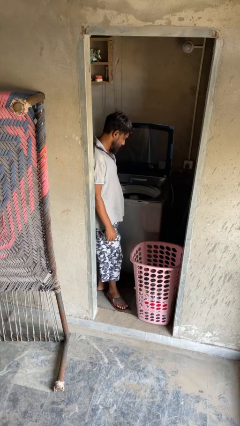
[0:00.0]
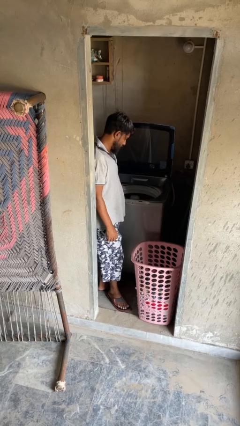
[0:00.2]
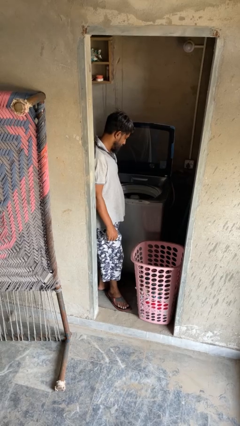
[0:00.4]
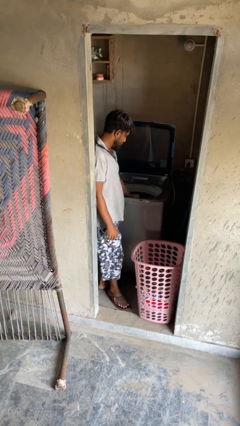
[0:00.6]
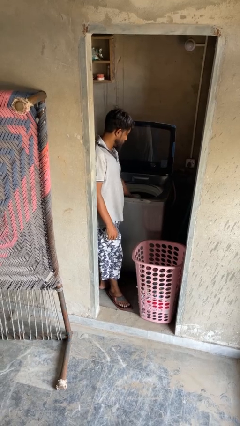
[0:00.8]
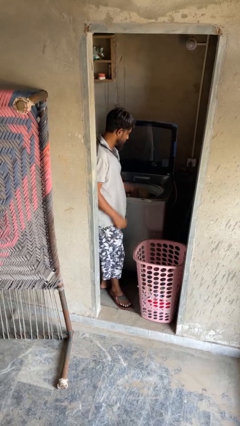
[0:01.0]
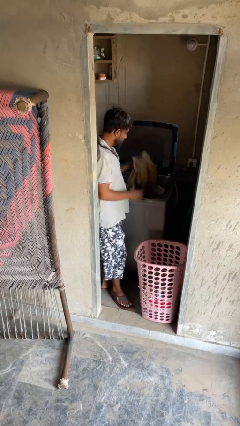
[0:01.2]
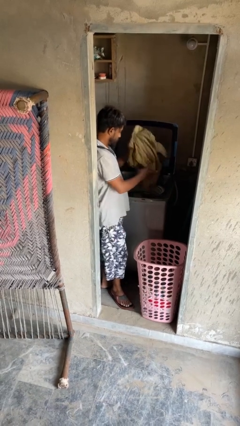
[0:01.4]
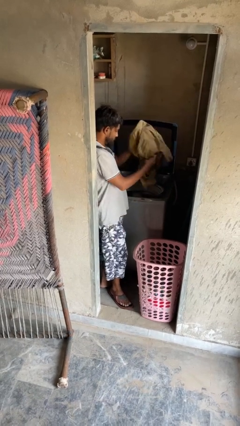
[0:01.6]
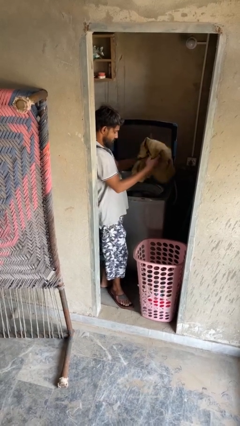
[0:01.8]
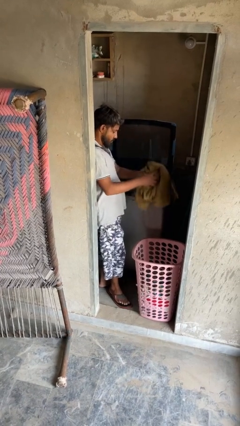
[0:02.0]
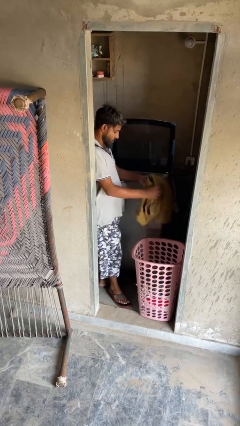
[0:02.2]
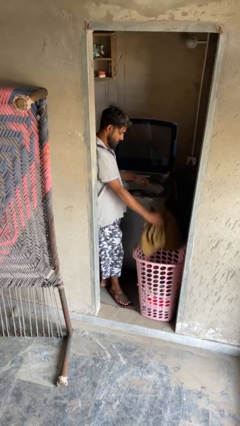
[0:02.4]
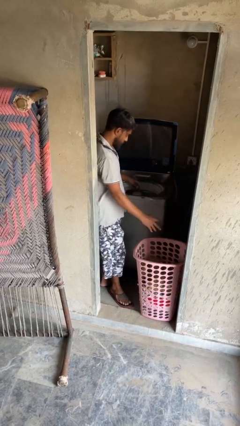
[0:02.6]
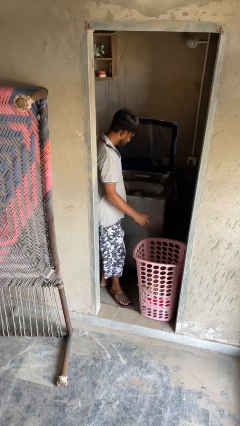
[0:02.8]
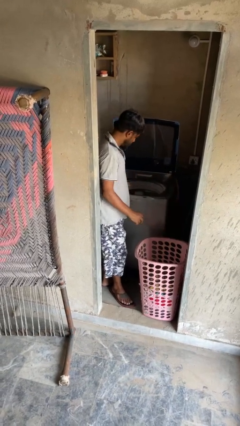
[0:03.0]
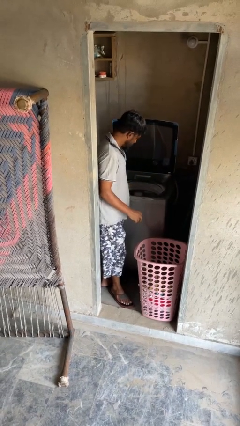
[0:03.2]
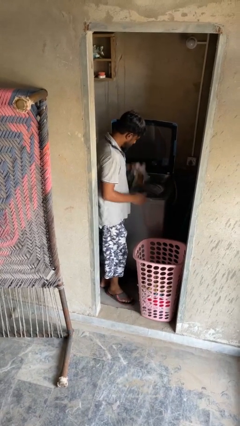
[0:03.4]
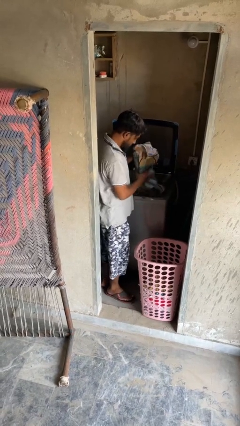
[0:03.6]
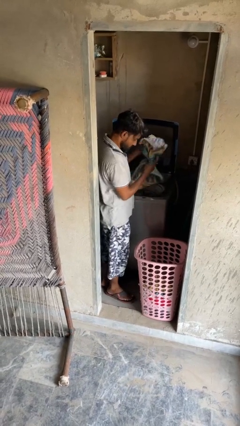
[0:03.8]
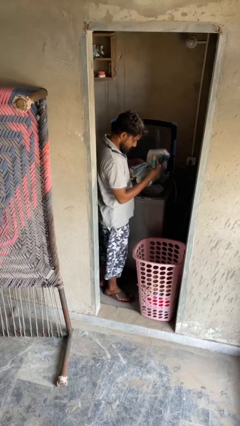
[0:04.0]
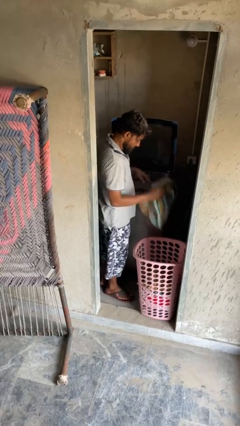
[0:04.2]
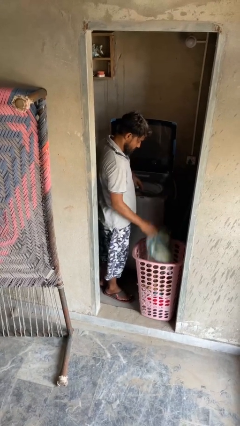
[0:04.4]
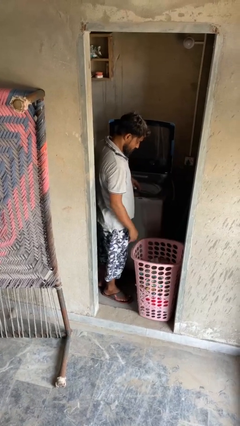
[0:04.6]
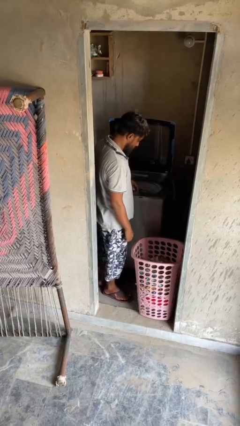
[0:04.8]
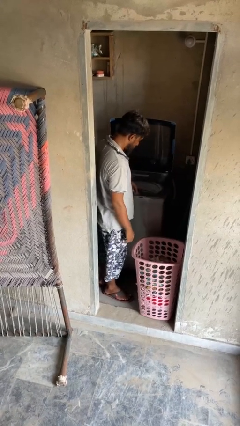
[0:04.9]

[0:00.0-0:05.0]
person loads clotheswasher

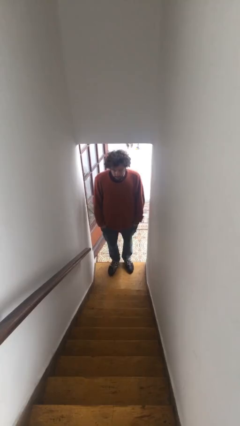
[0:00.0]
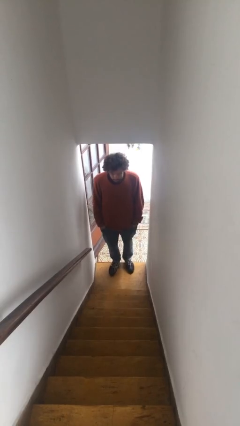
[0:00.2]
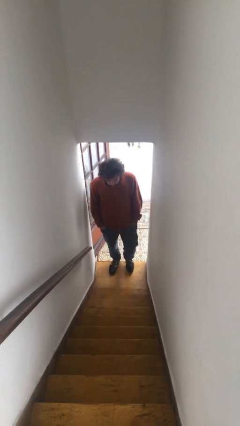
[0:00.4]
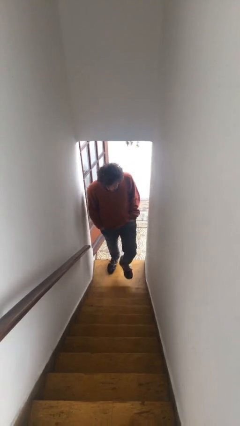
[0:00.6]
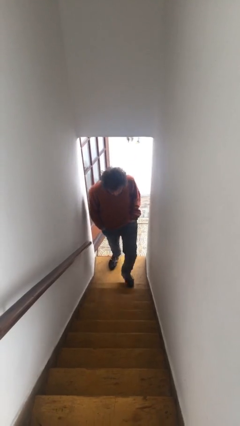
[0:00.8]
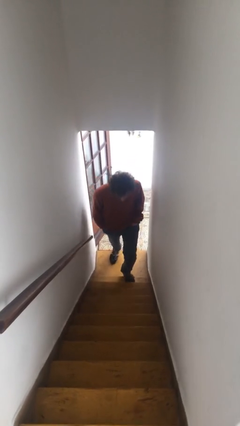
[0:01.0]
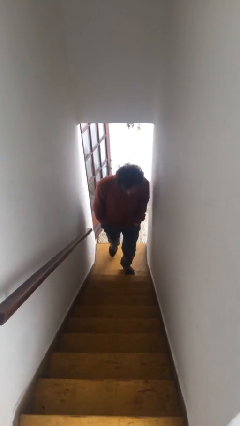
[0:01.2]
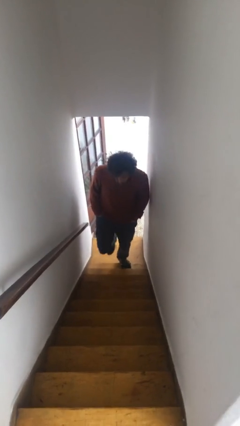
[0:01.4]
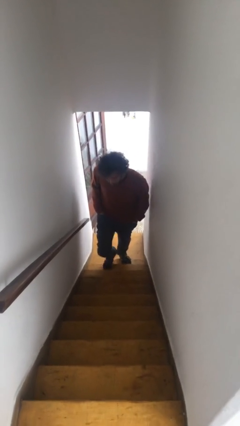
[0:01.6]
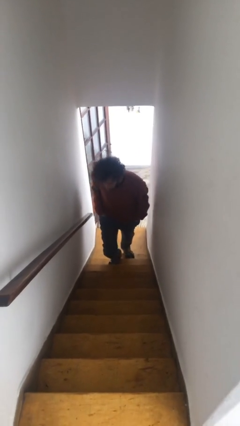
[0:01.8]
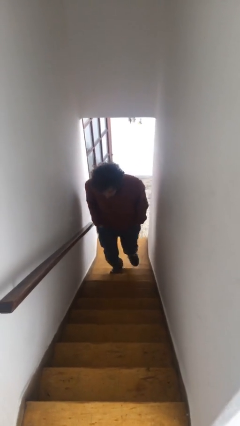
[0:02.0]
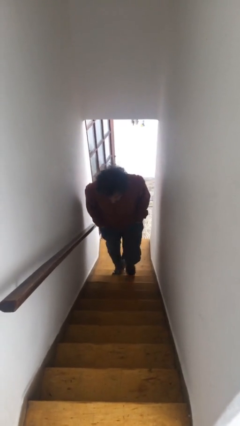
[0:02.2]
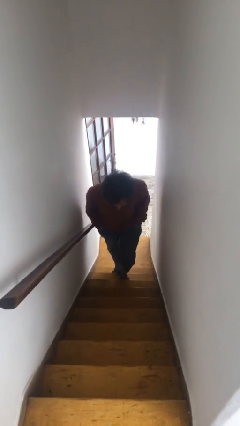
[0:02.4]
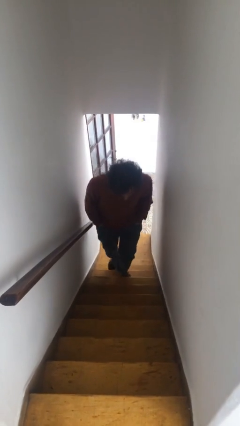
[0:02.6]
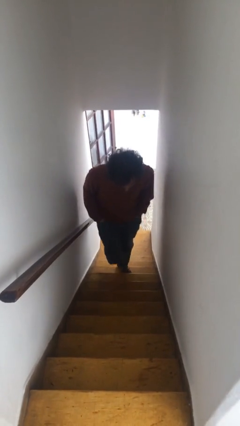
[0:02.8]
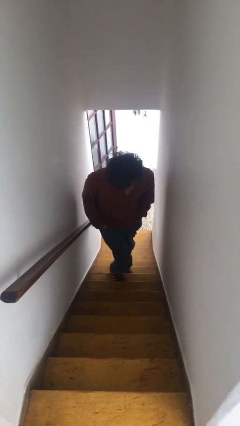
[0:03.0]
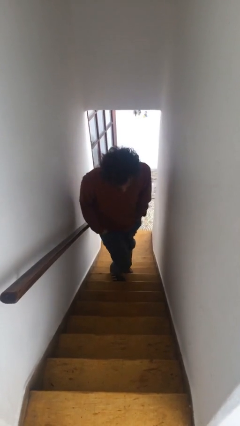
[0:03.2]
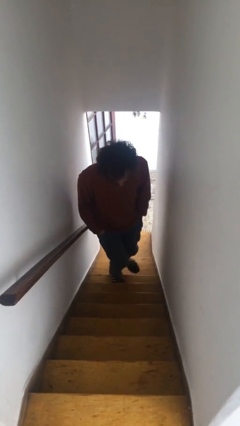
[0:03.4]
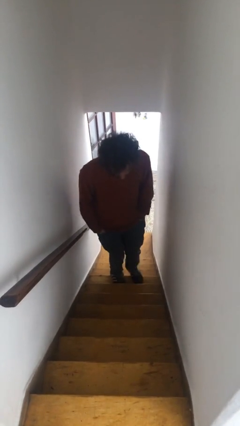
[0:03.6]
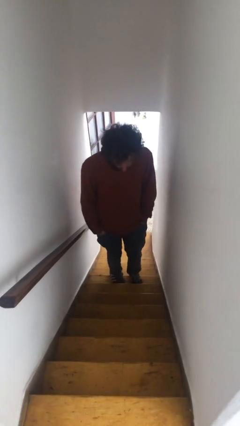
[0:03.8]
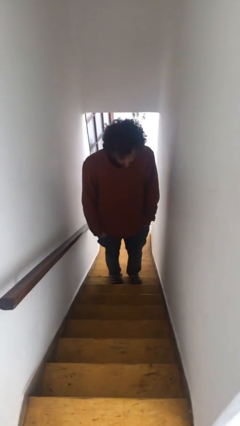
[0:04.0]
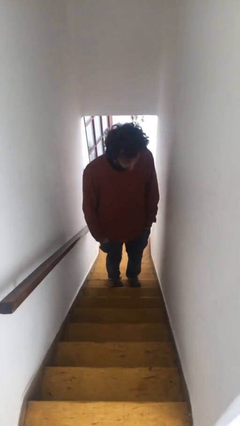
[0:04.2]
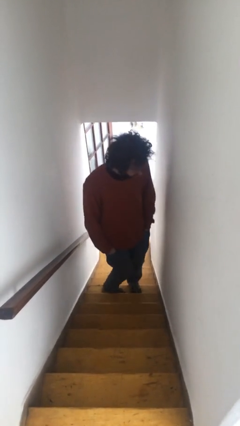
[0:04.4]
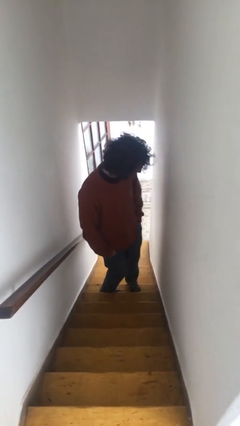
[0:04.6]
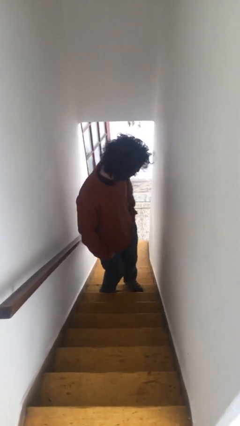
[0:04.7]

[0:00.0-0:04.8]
person climbs up stairs

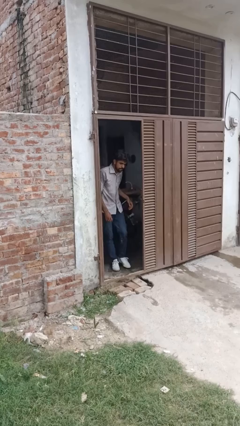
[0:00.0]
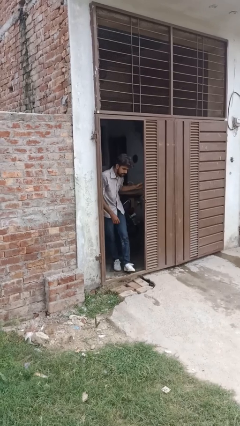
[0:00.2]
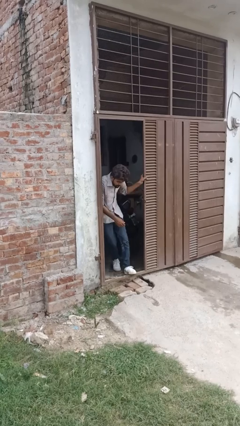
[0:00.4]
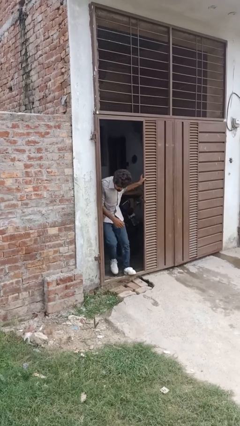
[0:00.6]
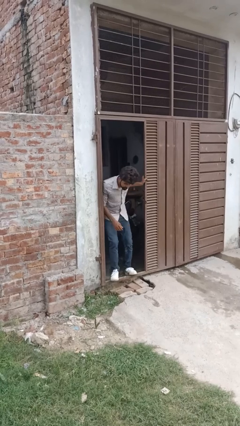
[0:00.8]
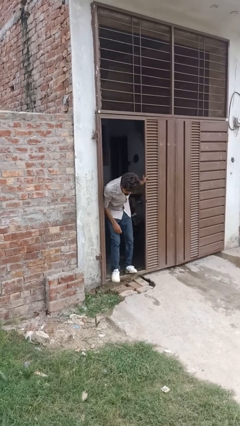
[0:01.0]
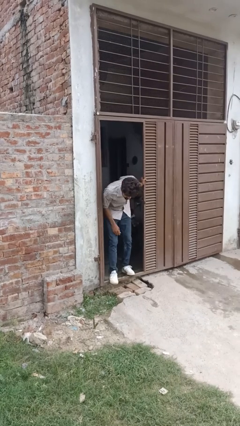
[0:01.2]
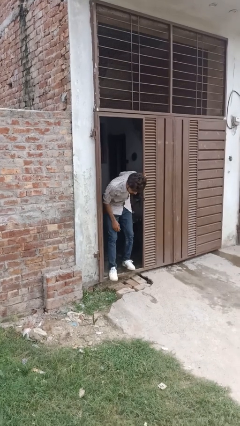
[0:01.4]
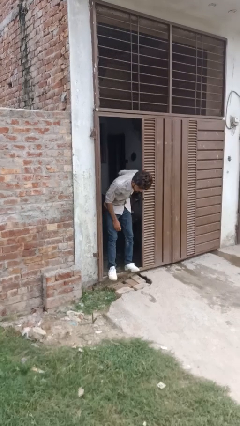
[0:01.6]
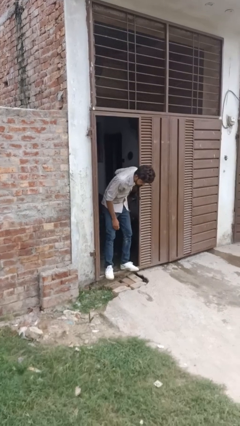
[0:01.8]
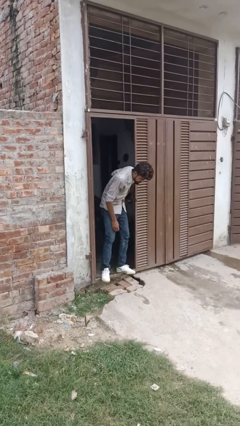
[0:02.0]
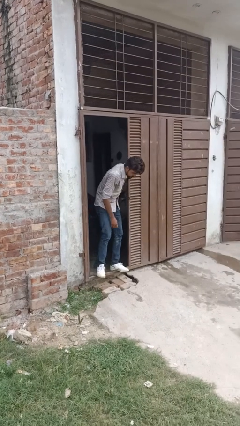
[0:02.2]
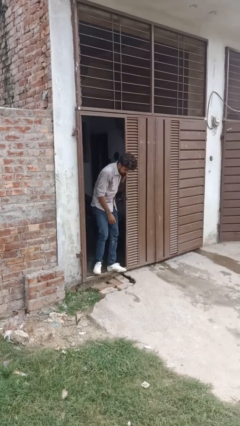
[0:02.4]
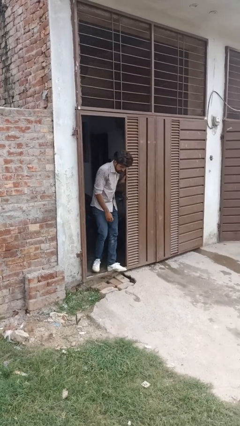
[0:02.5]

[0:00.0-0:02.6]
person bumps into wall

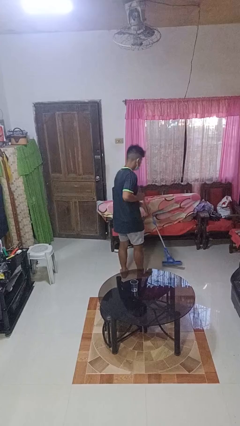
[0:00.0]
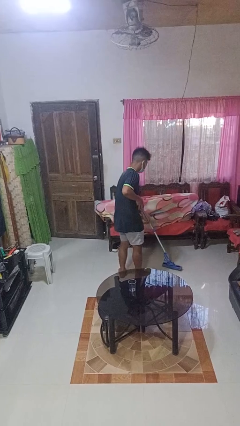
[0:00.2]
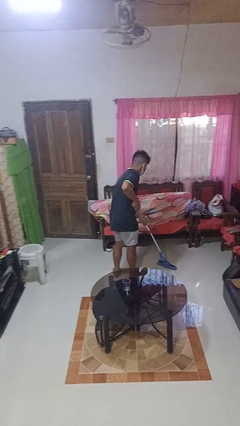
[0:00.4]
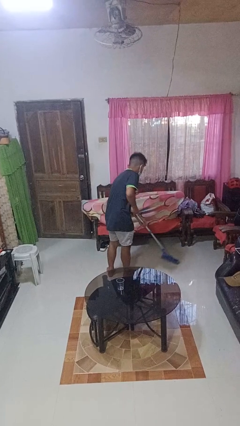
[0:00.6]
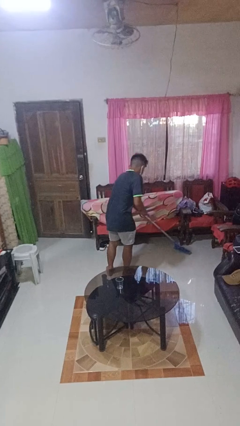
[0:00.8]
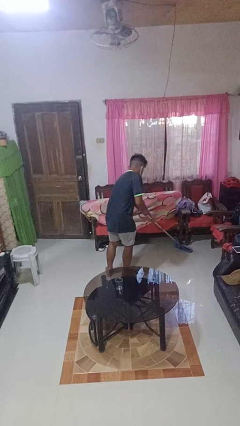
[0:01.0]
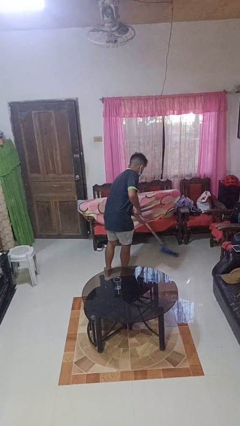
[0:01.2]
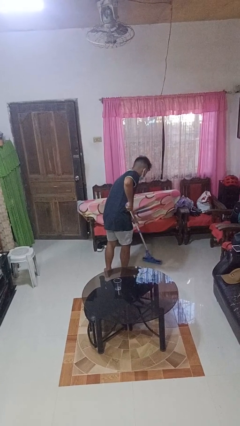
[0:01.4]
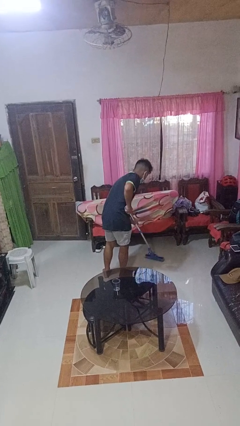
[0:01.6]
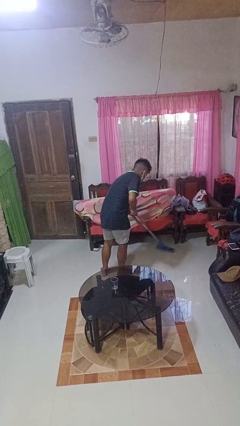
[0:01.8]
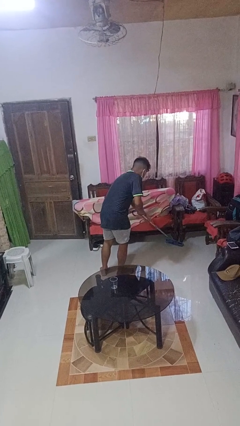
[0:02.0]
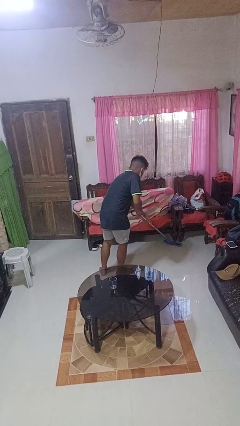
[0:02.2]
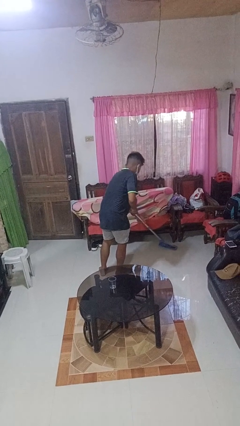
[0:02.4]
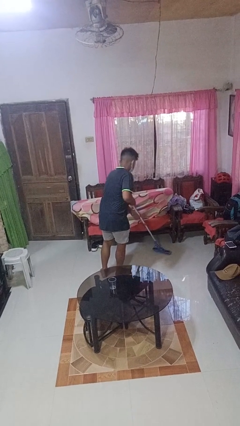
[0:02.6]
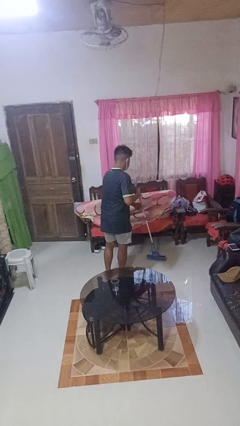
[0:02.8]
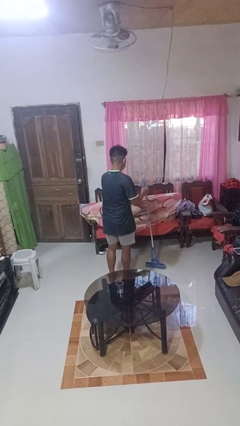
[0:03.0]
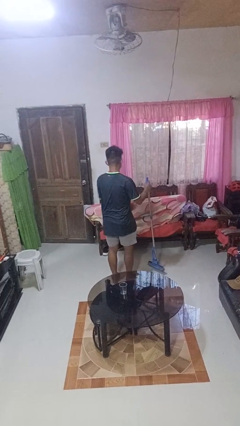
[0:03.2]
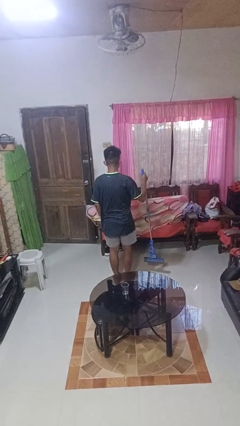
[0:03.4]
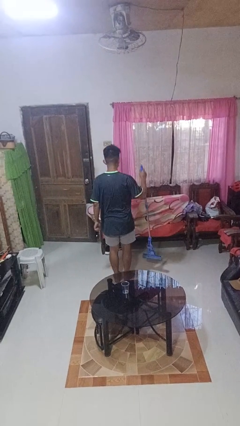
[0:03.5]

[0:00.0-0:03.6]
person mops

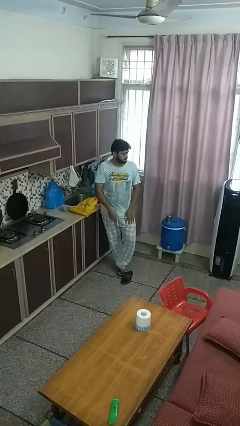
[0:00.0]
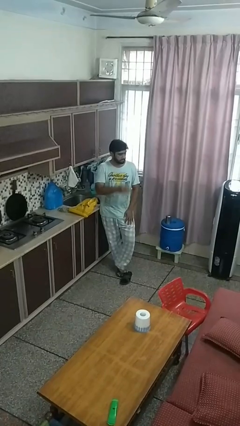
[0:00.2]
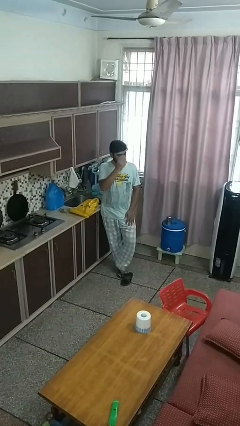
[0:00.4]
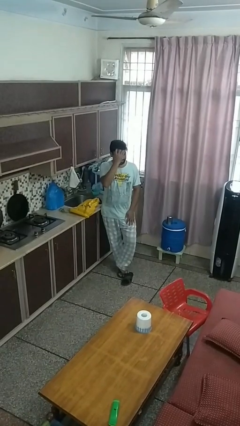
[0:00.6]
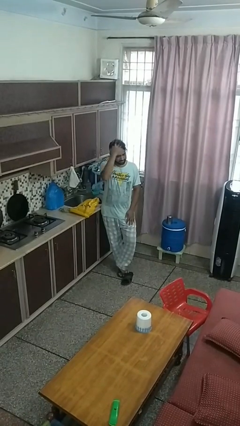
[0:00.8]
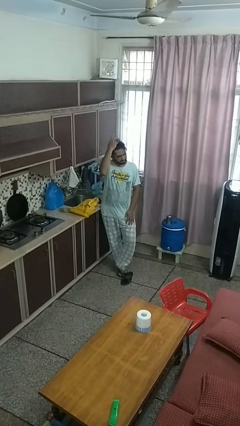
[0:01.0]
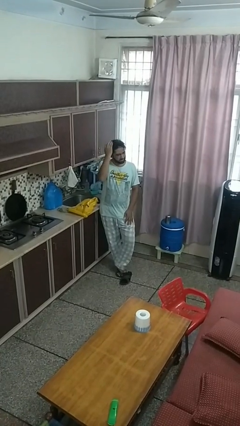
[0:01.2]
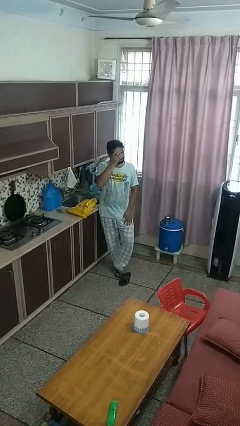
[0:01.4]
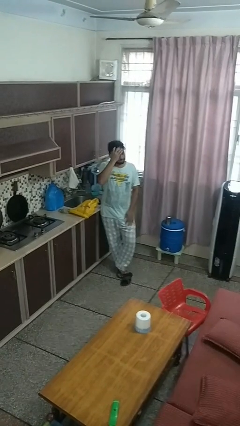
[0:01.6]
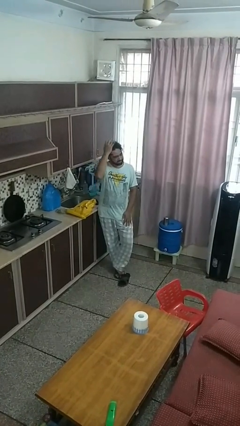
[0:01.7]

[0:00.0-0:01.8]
person strokes hair
